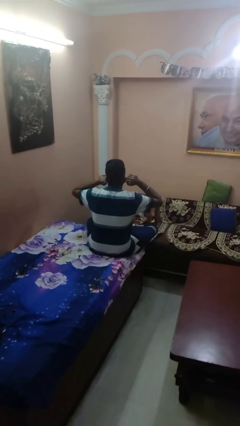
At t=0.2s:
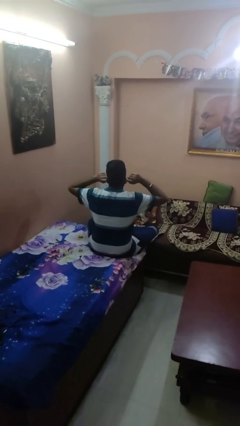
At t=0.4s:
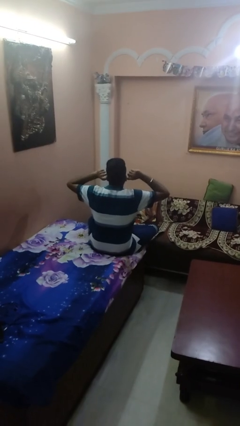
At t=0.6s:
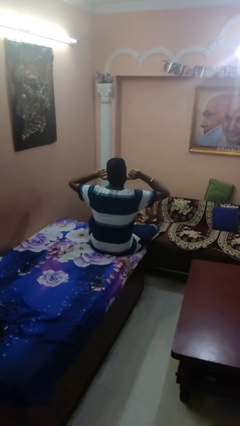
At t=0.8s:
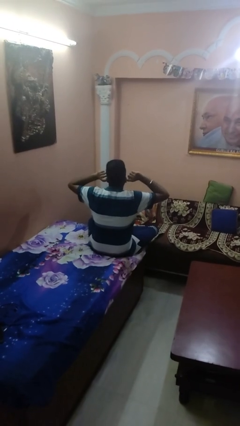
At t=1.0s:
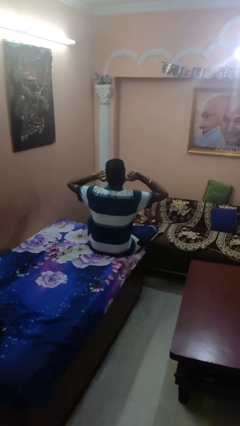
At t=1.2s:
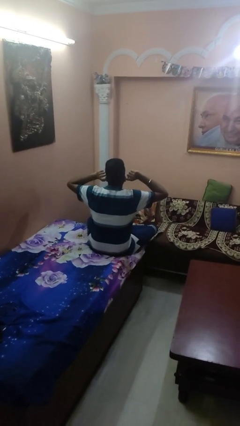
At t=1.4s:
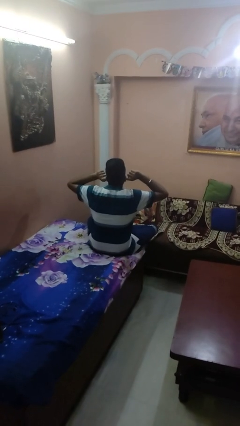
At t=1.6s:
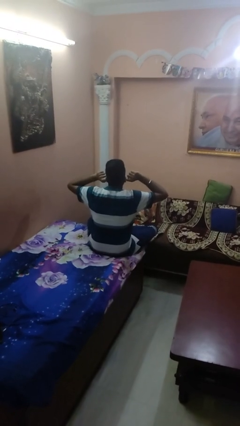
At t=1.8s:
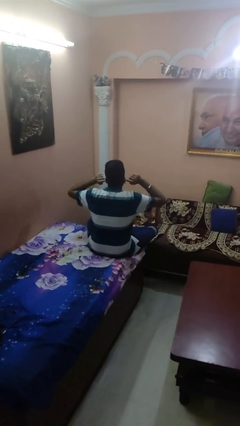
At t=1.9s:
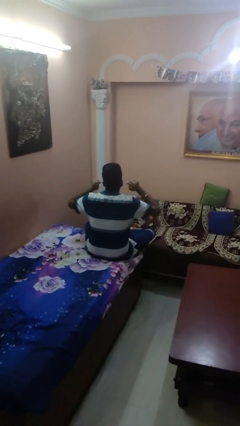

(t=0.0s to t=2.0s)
person puts fingers in ear

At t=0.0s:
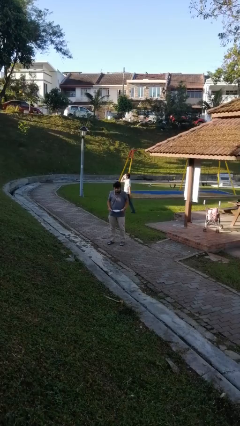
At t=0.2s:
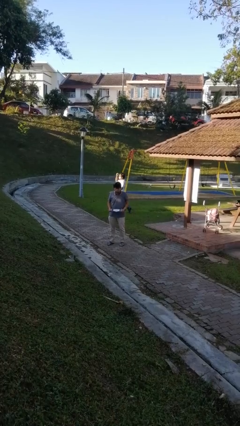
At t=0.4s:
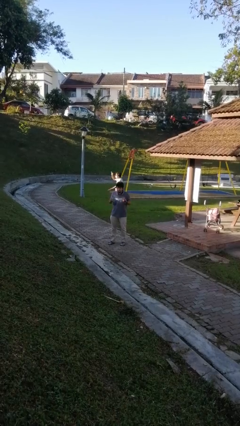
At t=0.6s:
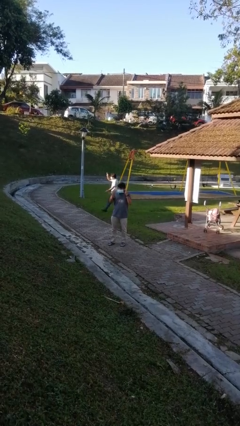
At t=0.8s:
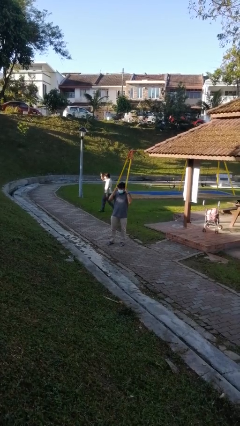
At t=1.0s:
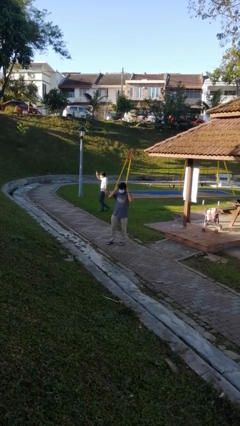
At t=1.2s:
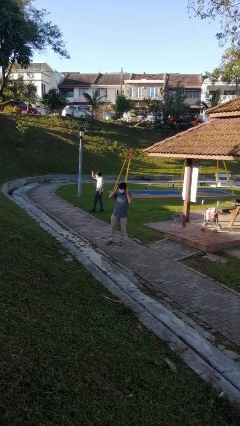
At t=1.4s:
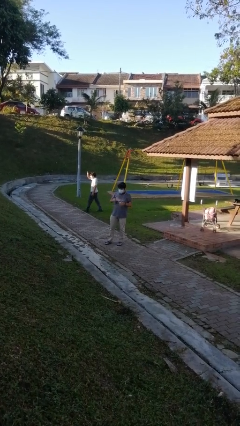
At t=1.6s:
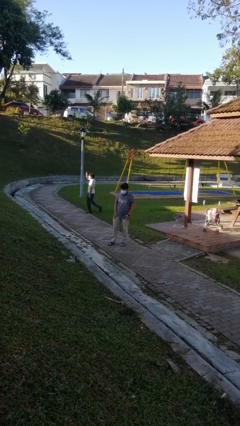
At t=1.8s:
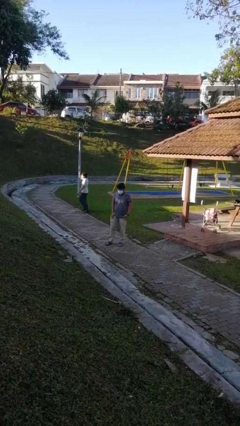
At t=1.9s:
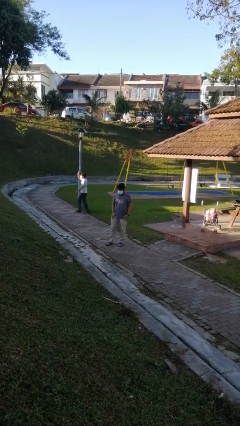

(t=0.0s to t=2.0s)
person puts on facemask

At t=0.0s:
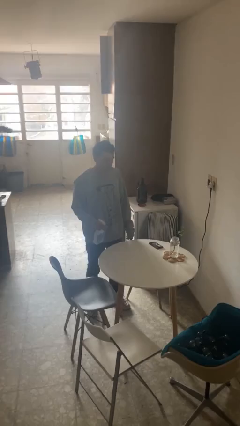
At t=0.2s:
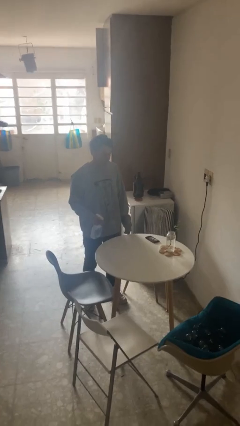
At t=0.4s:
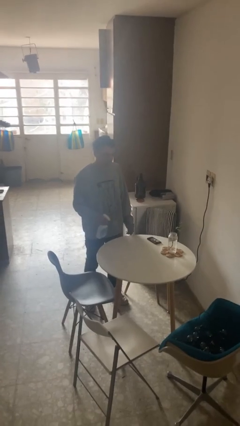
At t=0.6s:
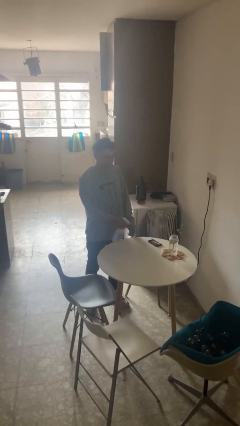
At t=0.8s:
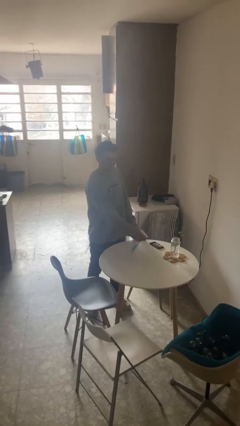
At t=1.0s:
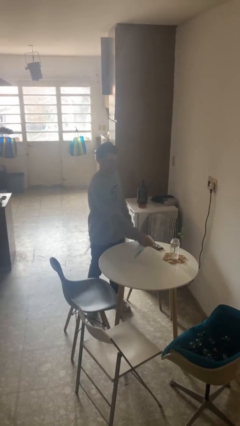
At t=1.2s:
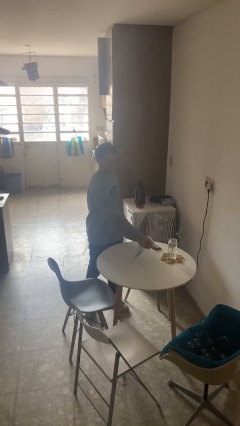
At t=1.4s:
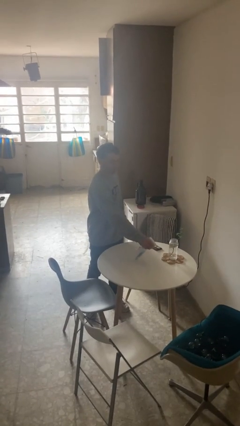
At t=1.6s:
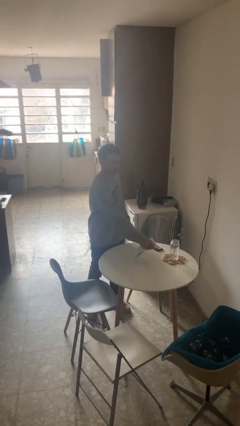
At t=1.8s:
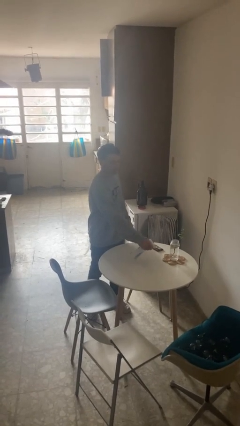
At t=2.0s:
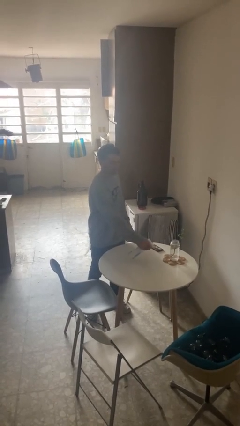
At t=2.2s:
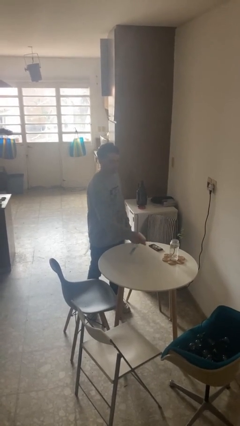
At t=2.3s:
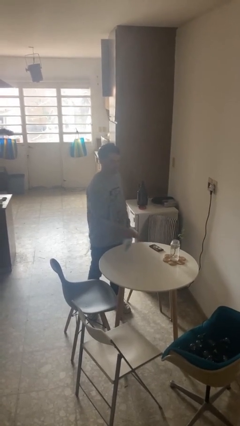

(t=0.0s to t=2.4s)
person sprays from bottle

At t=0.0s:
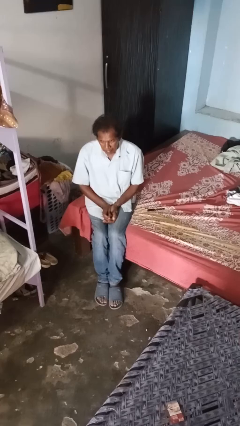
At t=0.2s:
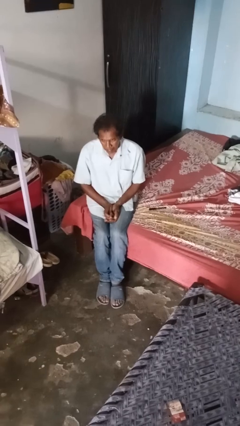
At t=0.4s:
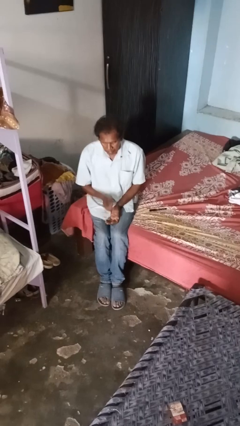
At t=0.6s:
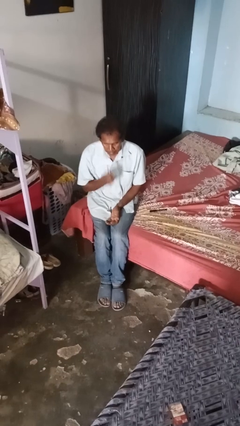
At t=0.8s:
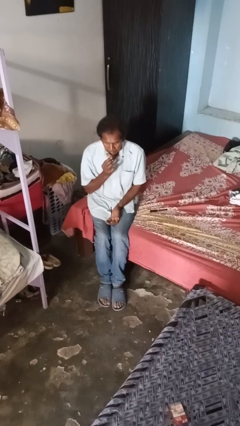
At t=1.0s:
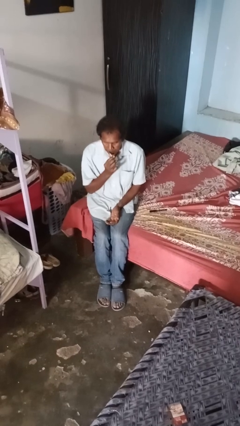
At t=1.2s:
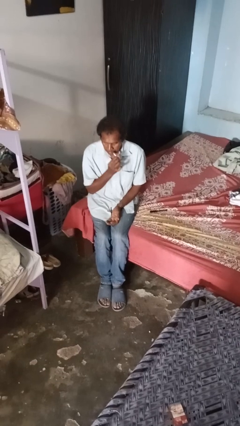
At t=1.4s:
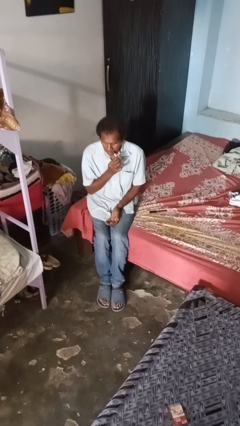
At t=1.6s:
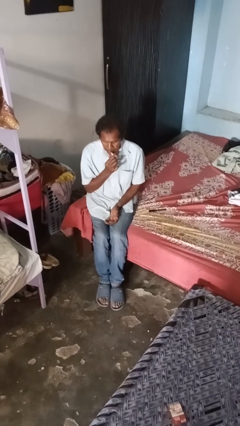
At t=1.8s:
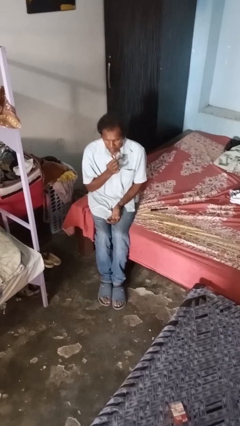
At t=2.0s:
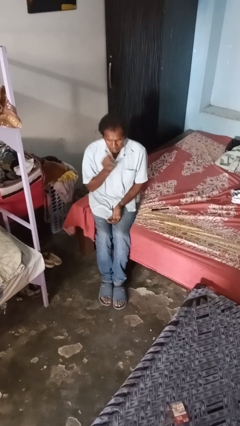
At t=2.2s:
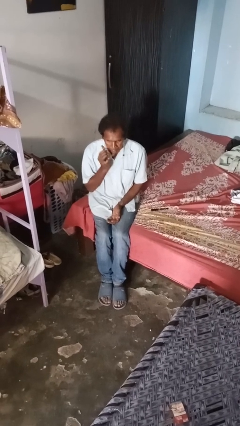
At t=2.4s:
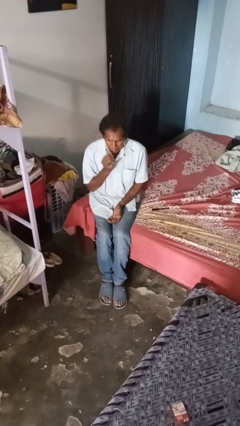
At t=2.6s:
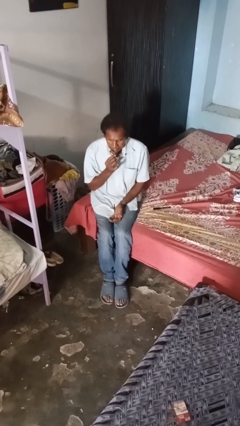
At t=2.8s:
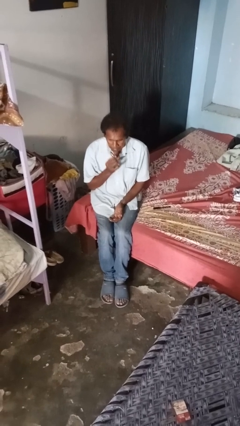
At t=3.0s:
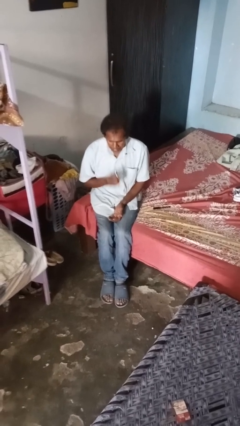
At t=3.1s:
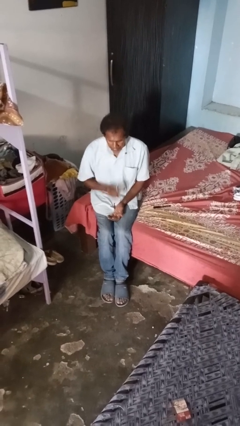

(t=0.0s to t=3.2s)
person applies lip makeup

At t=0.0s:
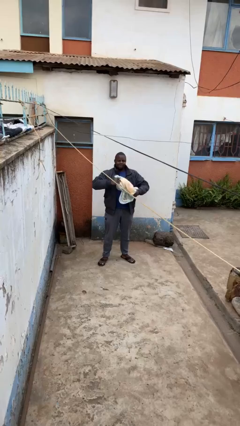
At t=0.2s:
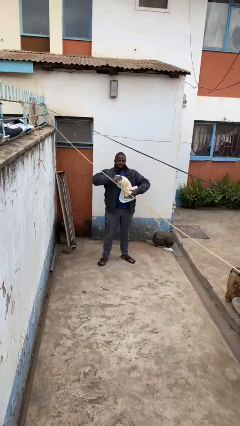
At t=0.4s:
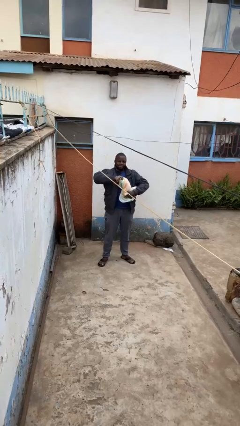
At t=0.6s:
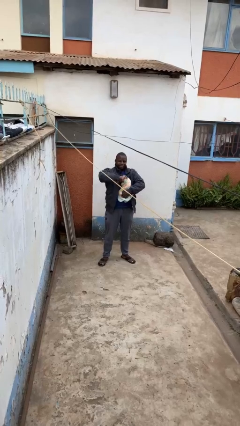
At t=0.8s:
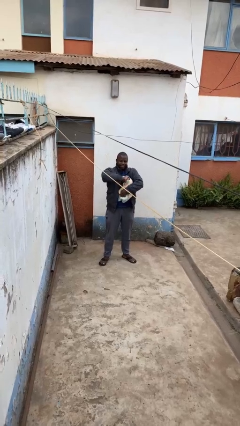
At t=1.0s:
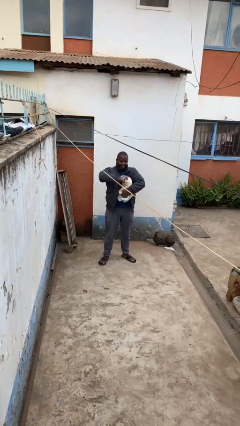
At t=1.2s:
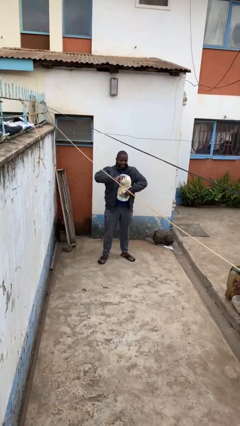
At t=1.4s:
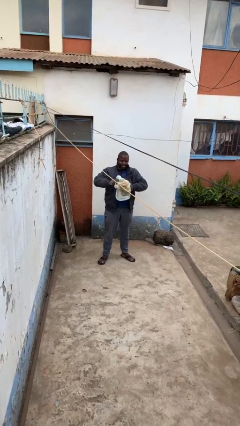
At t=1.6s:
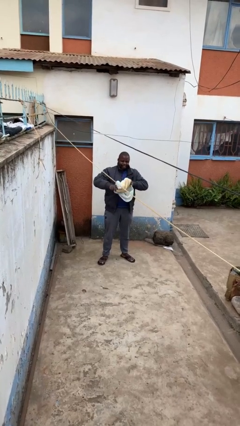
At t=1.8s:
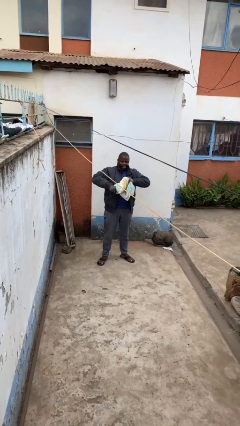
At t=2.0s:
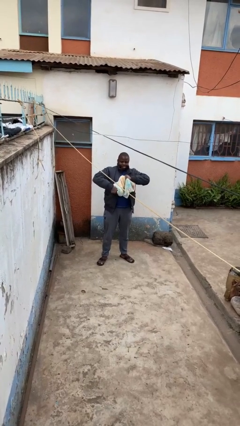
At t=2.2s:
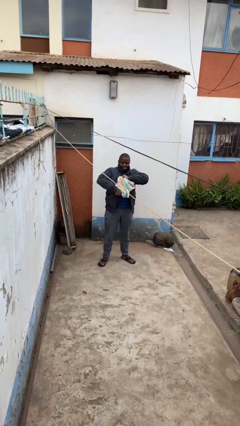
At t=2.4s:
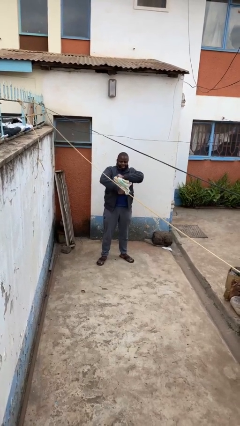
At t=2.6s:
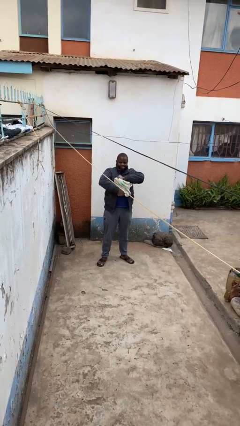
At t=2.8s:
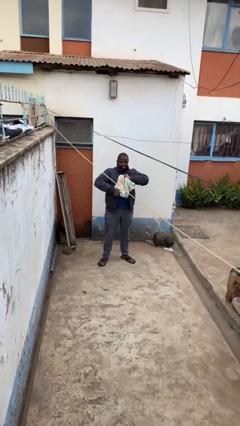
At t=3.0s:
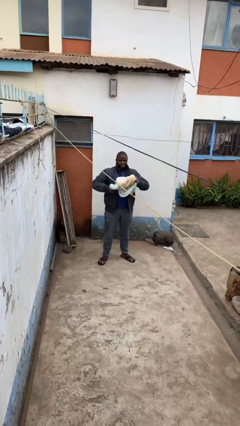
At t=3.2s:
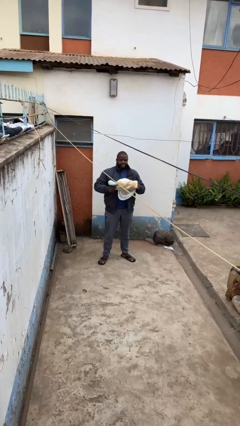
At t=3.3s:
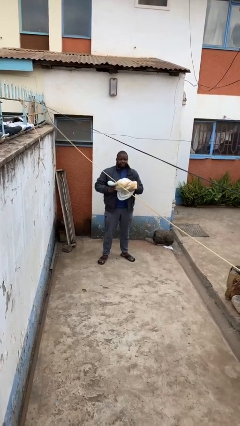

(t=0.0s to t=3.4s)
person squeezes object

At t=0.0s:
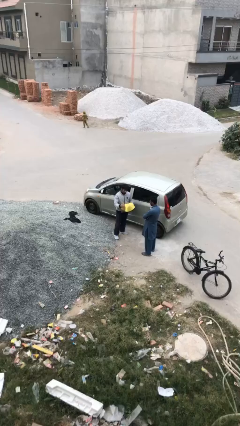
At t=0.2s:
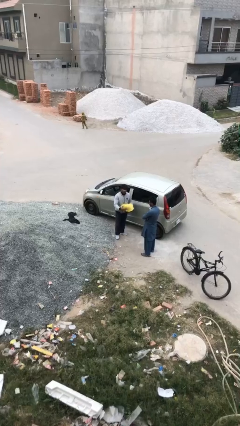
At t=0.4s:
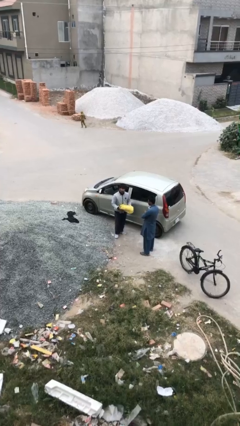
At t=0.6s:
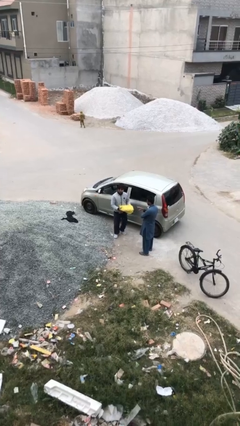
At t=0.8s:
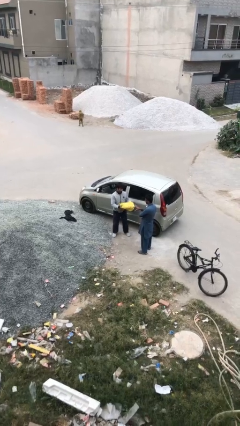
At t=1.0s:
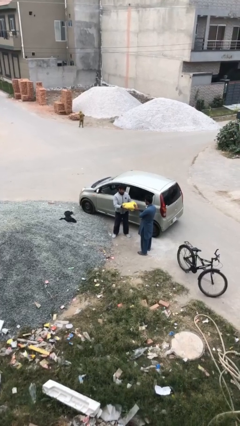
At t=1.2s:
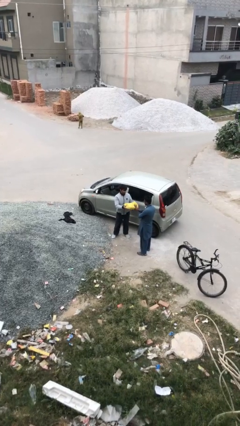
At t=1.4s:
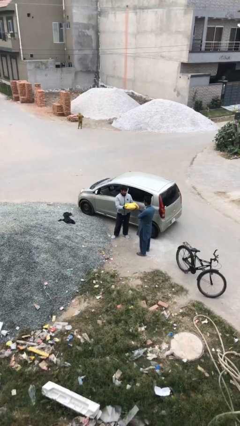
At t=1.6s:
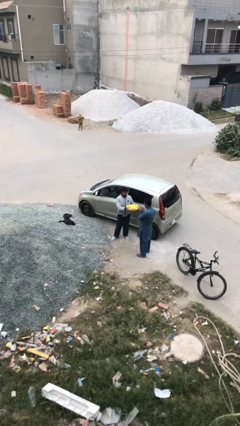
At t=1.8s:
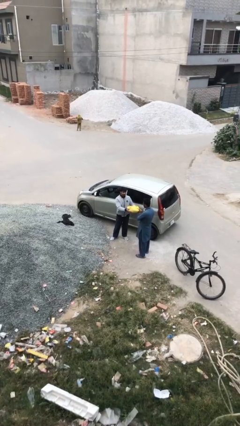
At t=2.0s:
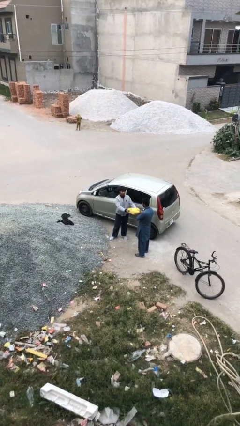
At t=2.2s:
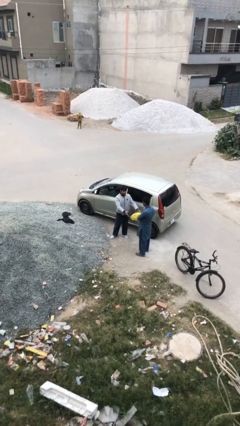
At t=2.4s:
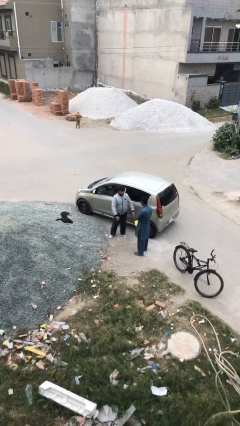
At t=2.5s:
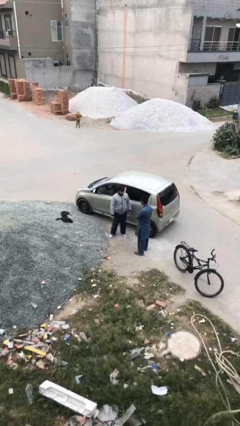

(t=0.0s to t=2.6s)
person transfers object to person

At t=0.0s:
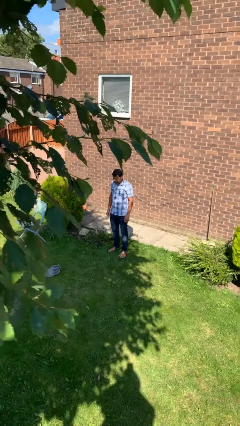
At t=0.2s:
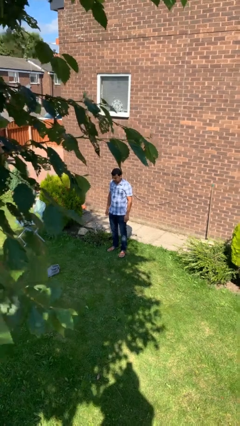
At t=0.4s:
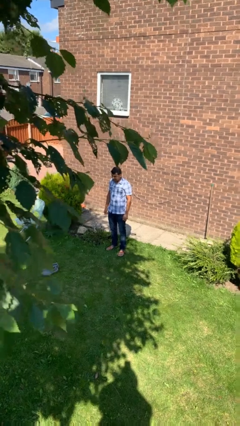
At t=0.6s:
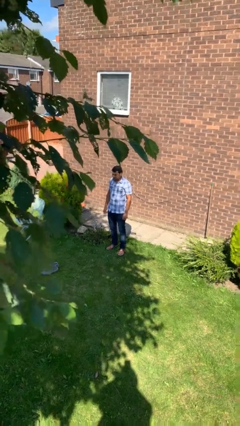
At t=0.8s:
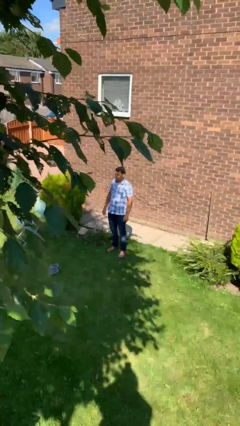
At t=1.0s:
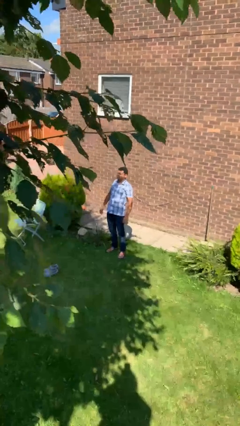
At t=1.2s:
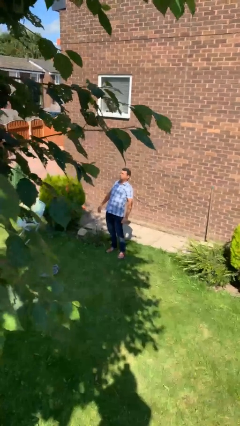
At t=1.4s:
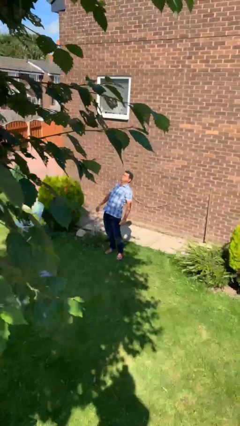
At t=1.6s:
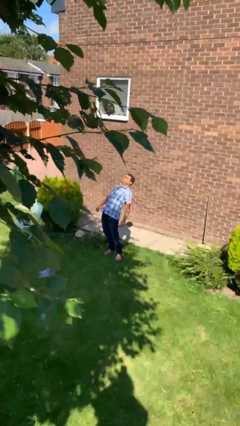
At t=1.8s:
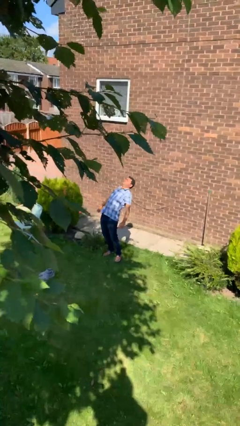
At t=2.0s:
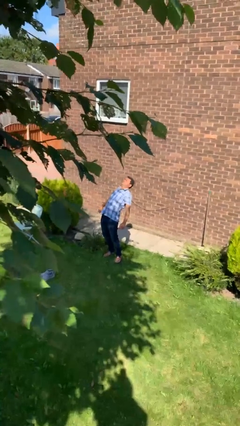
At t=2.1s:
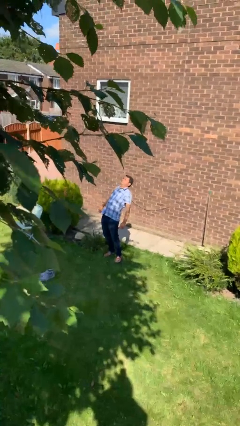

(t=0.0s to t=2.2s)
person stretches back
